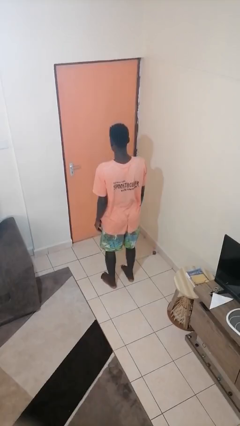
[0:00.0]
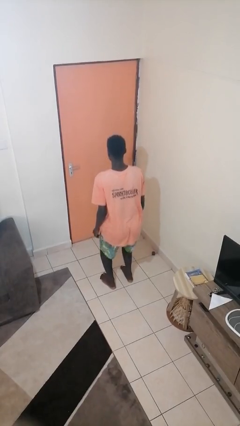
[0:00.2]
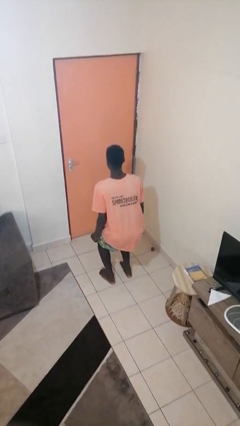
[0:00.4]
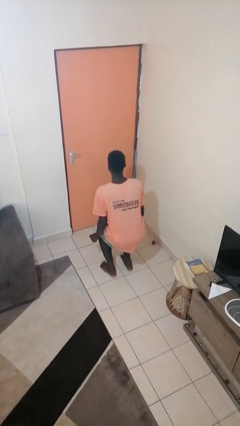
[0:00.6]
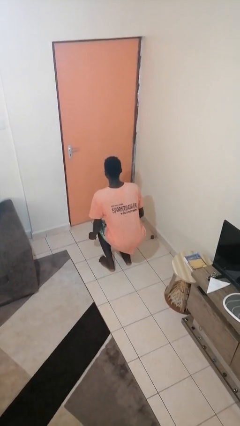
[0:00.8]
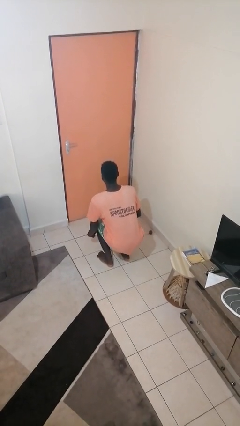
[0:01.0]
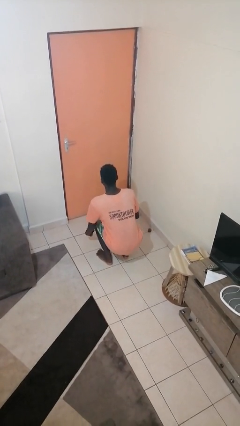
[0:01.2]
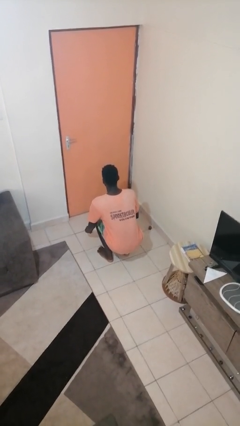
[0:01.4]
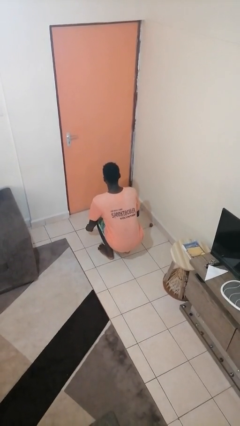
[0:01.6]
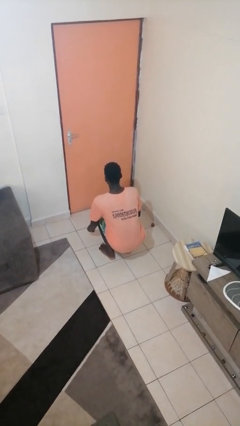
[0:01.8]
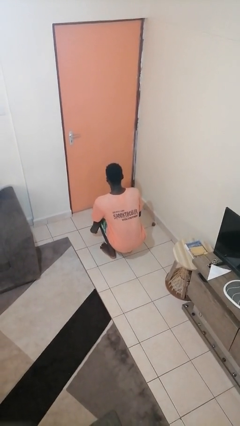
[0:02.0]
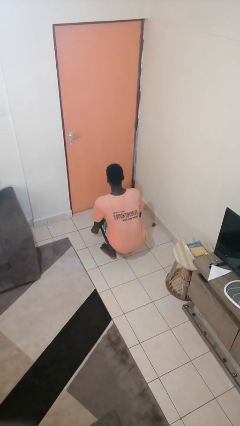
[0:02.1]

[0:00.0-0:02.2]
person squats

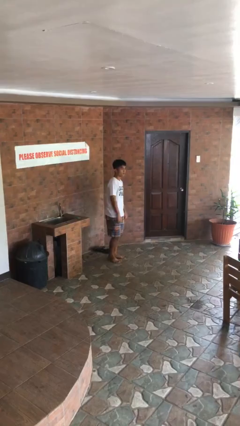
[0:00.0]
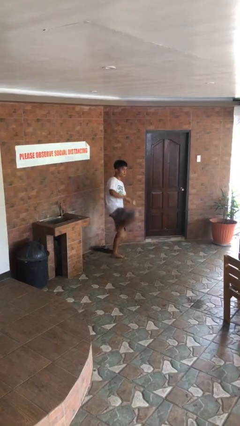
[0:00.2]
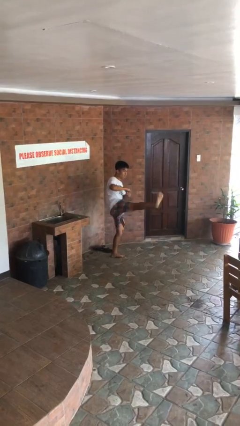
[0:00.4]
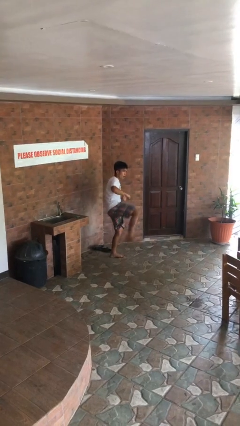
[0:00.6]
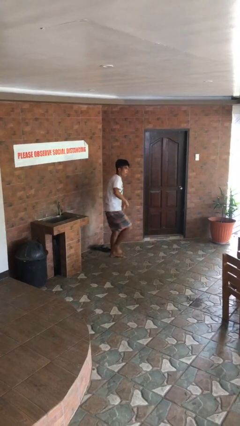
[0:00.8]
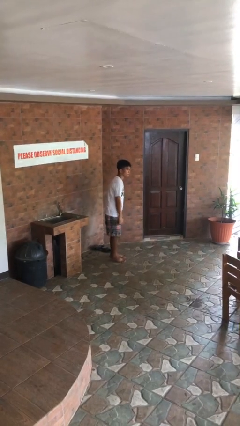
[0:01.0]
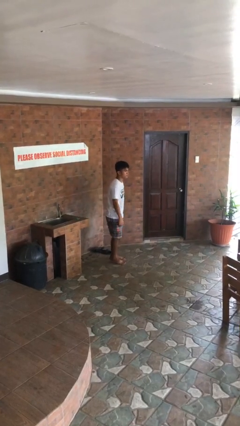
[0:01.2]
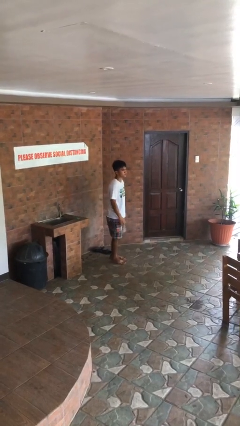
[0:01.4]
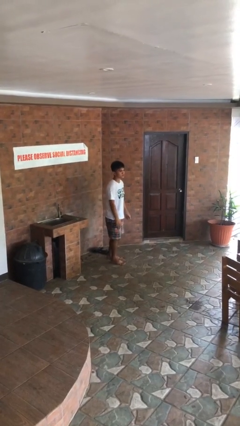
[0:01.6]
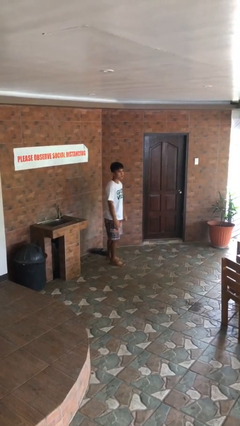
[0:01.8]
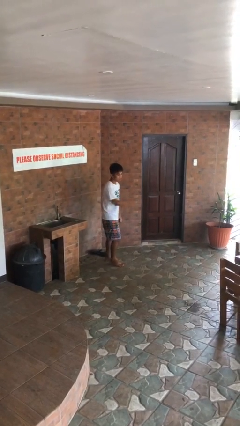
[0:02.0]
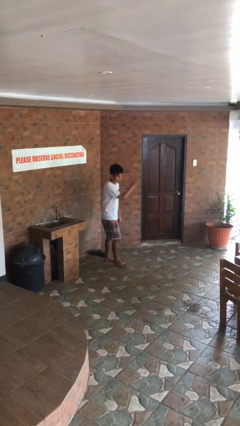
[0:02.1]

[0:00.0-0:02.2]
person karate kicks

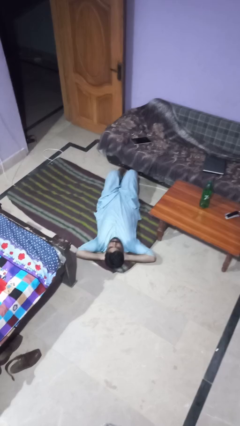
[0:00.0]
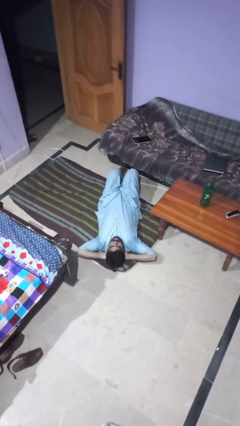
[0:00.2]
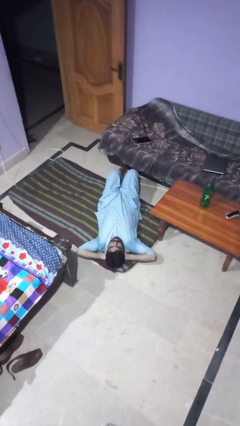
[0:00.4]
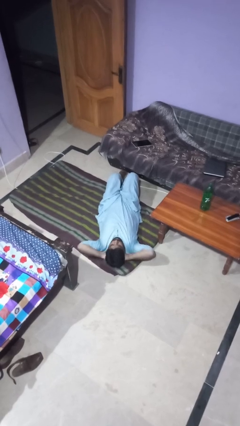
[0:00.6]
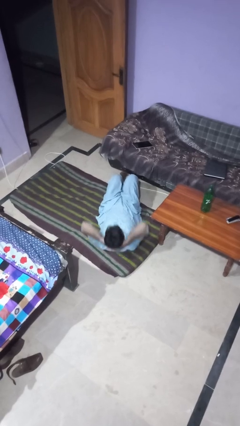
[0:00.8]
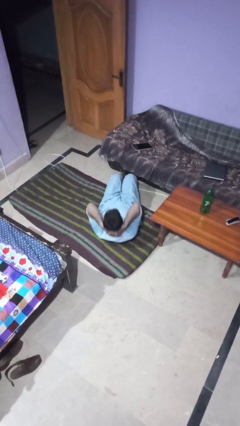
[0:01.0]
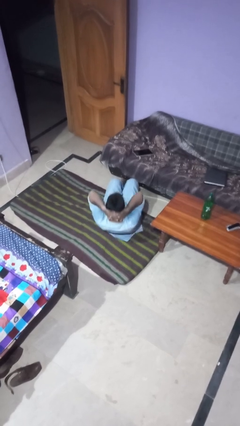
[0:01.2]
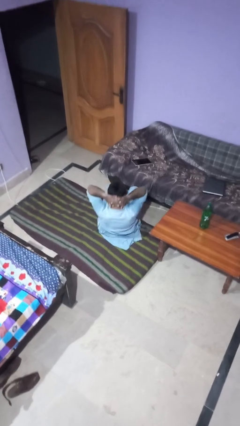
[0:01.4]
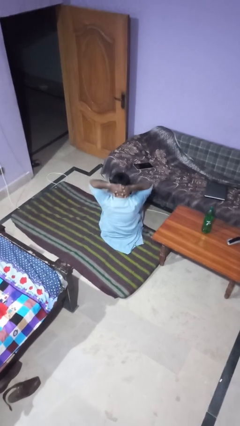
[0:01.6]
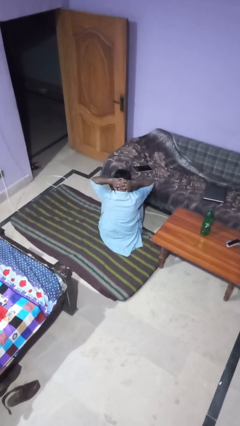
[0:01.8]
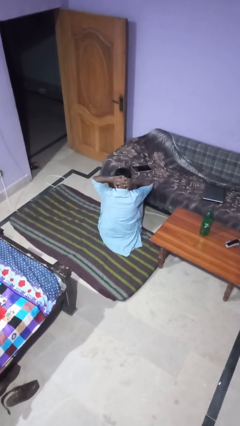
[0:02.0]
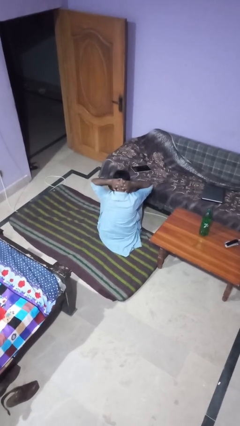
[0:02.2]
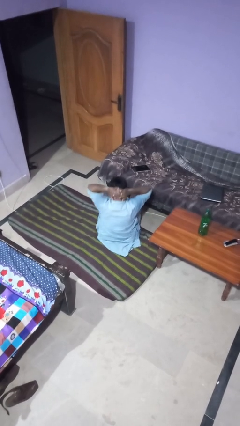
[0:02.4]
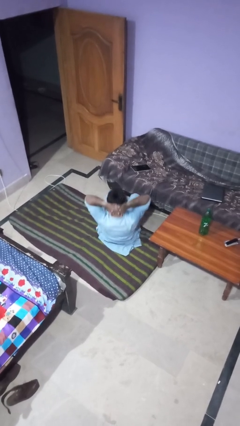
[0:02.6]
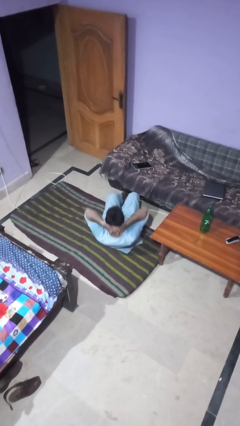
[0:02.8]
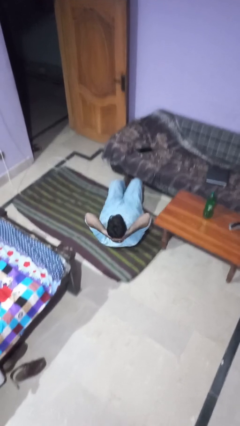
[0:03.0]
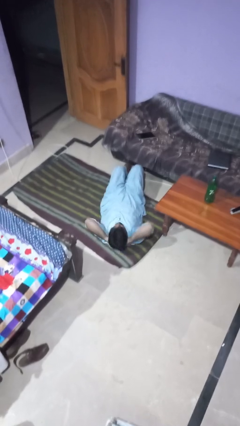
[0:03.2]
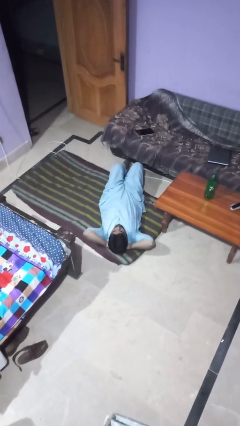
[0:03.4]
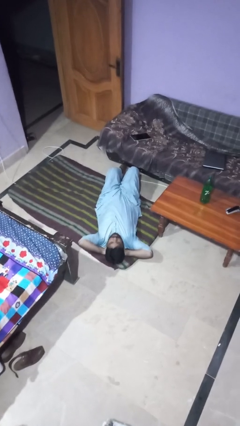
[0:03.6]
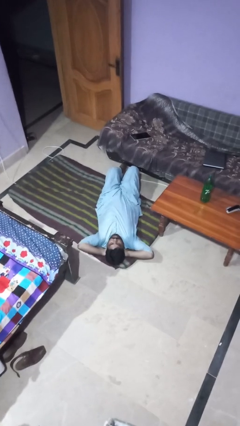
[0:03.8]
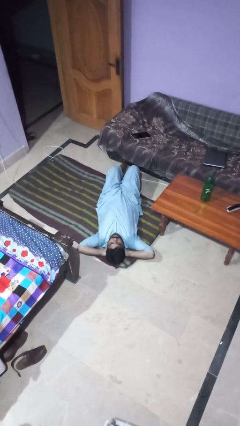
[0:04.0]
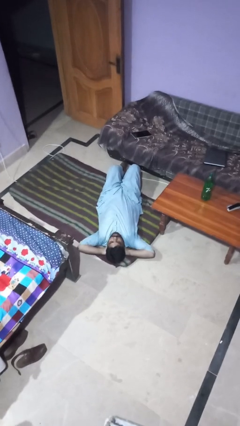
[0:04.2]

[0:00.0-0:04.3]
person exercises with situp

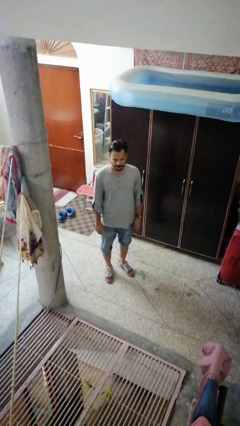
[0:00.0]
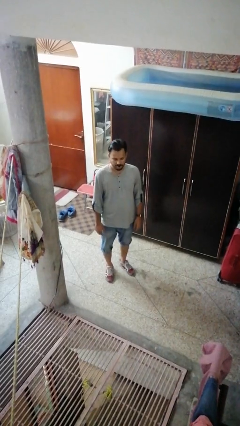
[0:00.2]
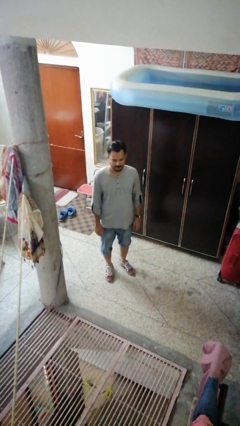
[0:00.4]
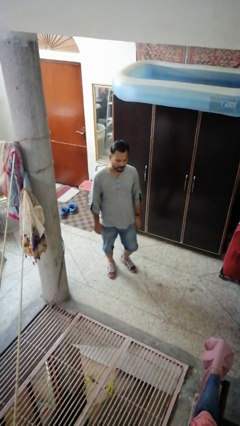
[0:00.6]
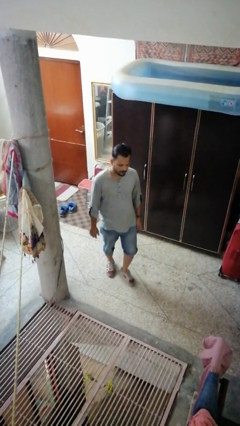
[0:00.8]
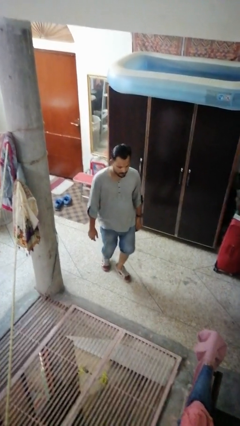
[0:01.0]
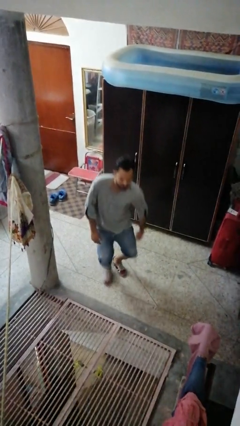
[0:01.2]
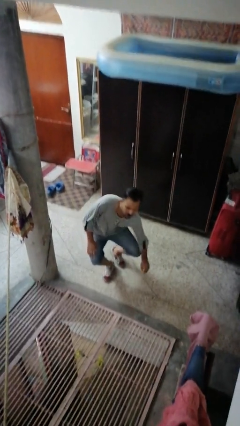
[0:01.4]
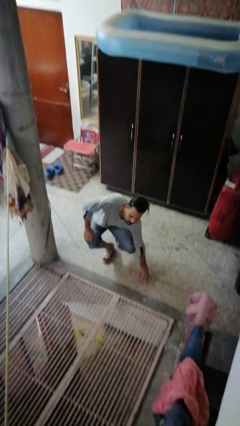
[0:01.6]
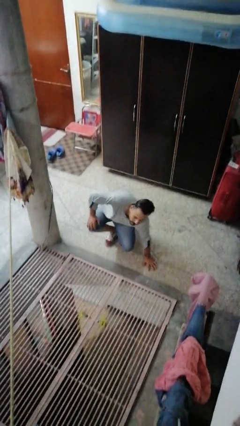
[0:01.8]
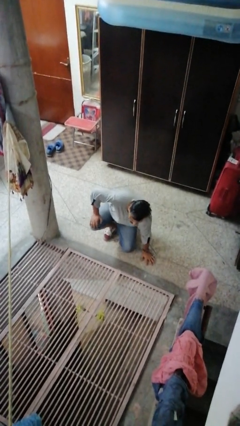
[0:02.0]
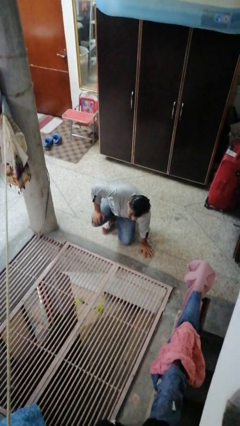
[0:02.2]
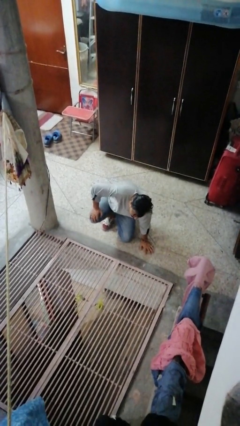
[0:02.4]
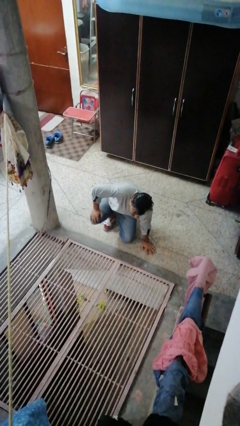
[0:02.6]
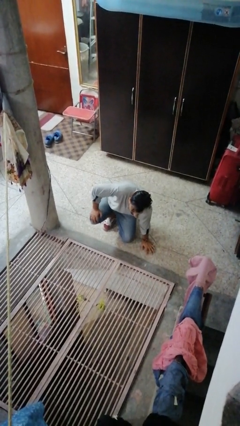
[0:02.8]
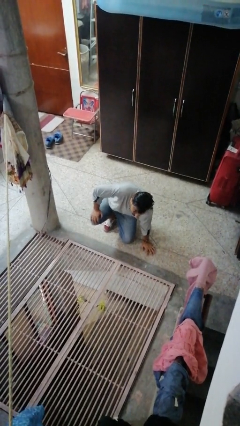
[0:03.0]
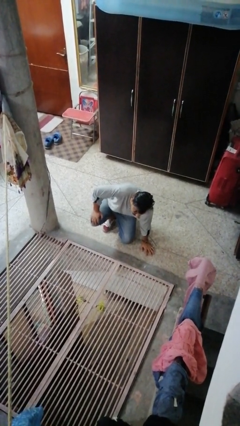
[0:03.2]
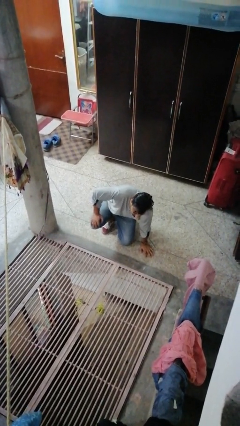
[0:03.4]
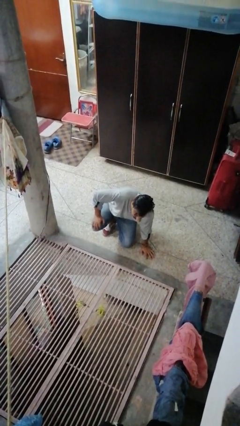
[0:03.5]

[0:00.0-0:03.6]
person falls while standing

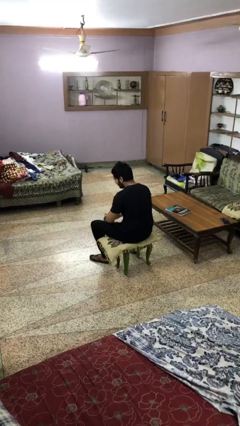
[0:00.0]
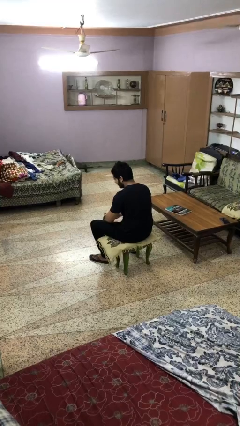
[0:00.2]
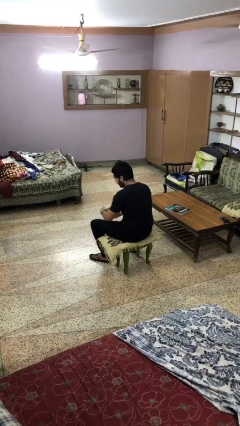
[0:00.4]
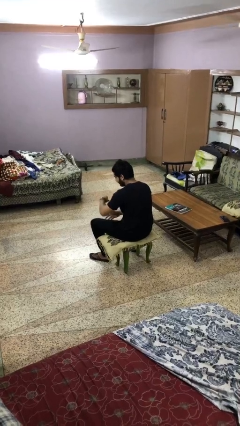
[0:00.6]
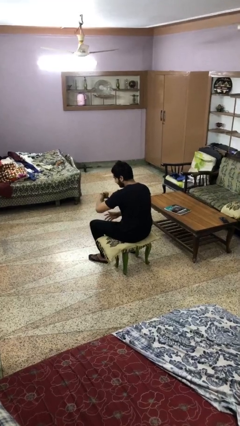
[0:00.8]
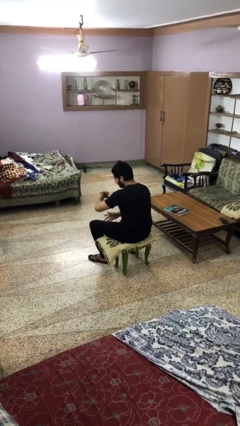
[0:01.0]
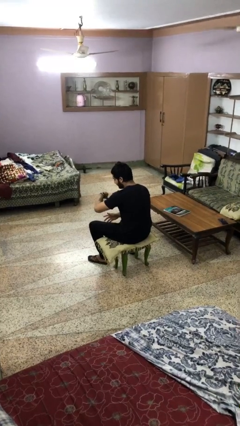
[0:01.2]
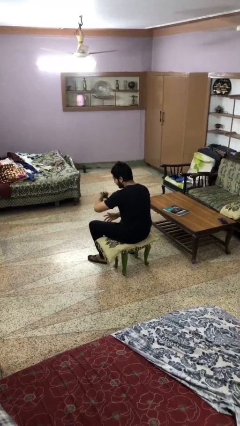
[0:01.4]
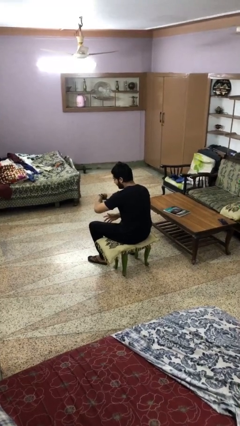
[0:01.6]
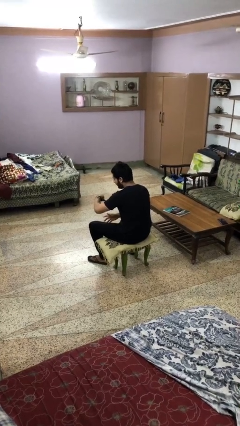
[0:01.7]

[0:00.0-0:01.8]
person looks at wristwatch

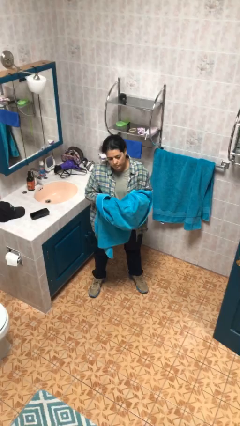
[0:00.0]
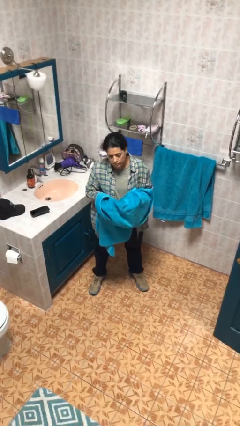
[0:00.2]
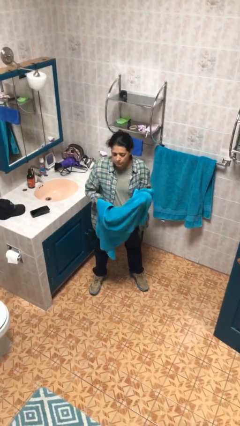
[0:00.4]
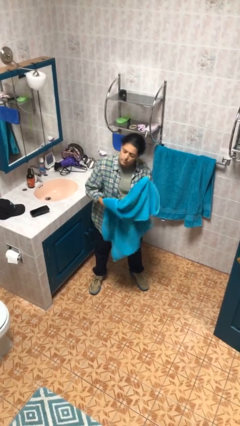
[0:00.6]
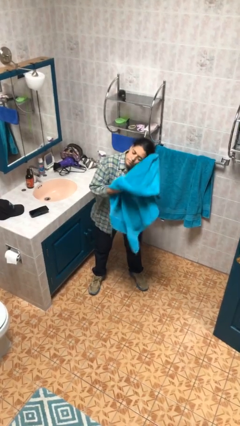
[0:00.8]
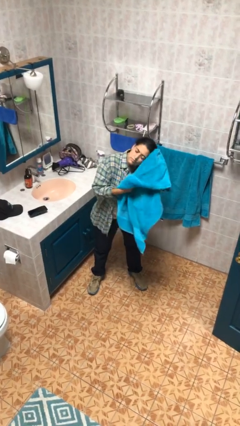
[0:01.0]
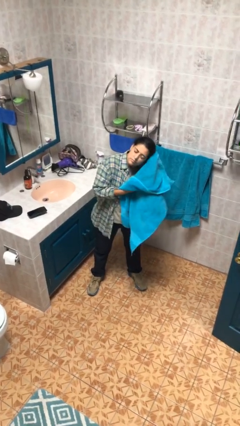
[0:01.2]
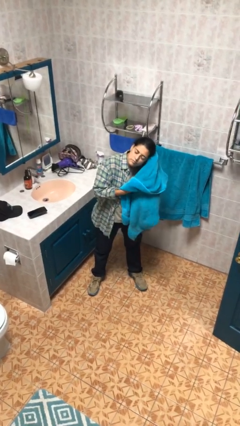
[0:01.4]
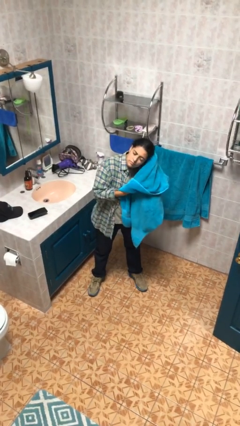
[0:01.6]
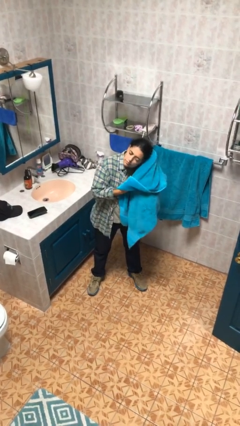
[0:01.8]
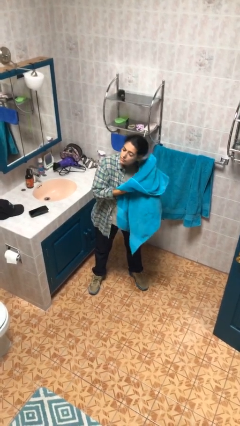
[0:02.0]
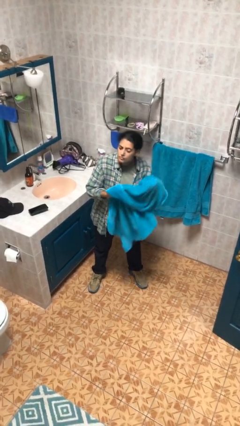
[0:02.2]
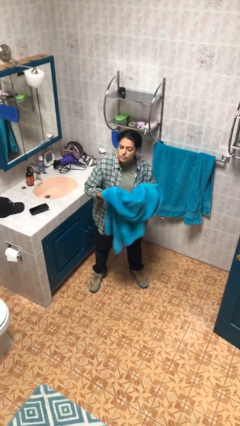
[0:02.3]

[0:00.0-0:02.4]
person dries hair with towel

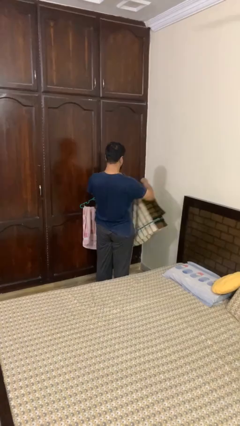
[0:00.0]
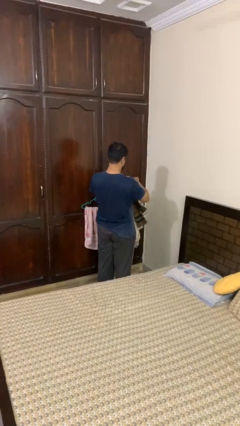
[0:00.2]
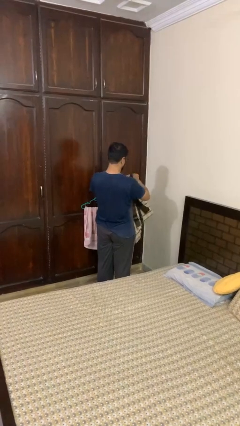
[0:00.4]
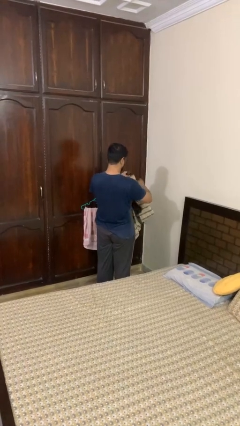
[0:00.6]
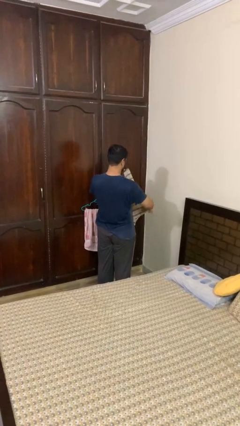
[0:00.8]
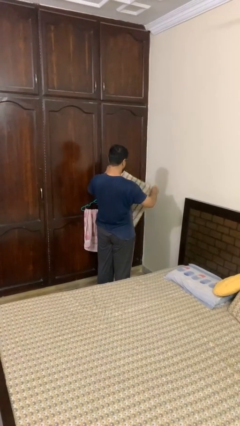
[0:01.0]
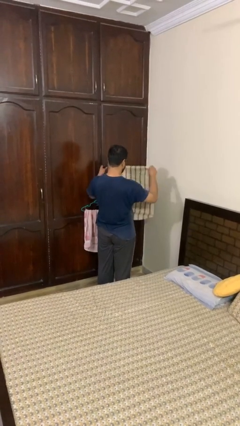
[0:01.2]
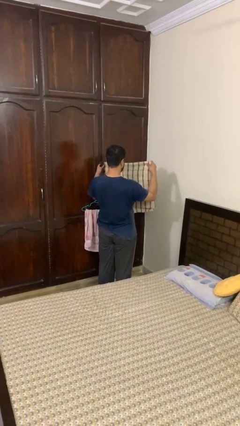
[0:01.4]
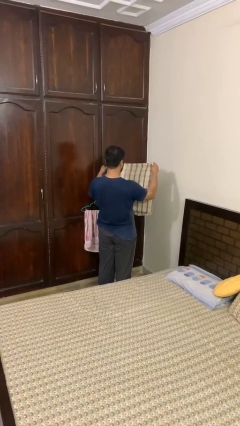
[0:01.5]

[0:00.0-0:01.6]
person folds blanket
